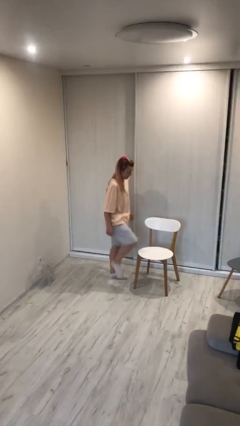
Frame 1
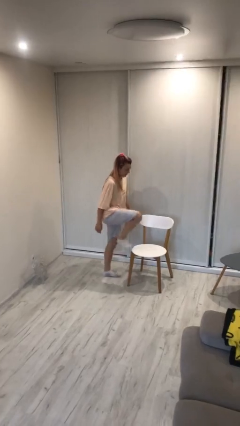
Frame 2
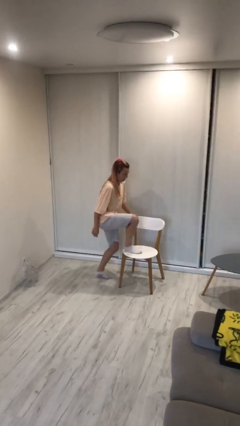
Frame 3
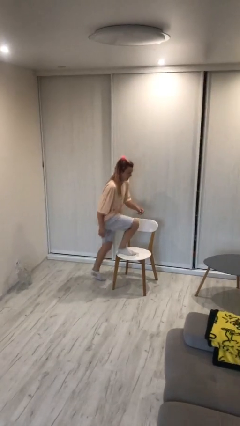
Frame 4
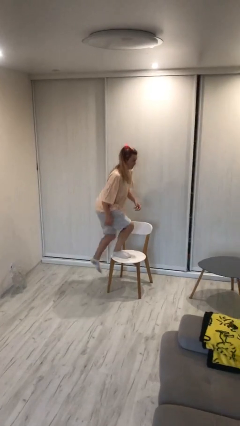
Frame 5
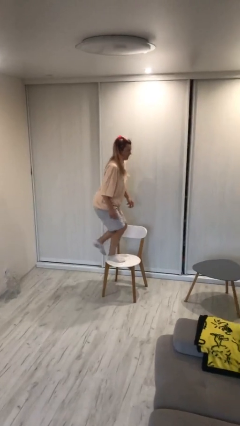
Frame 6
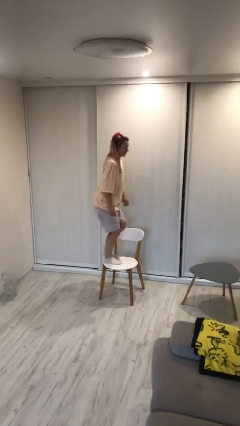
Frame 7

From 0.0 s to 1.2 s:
person climbs on chair

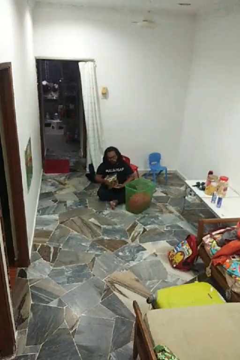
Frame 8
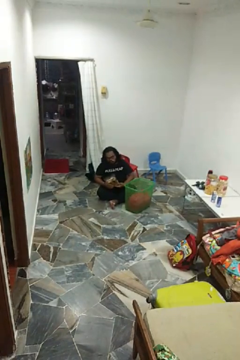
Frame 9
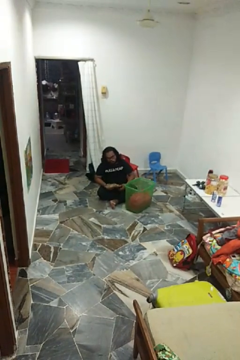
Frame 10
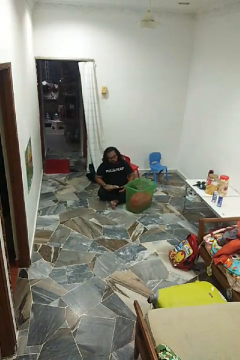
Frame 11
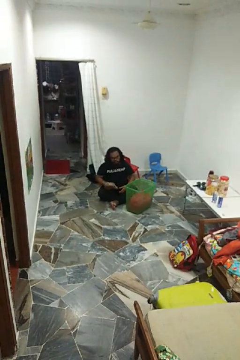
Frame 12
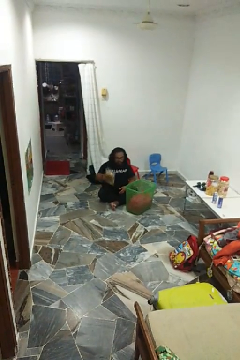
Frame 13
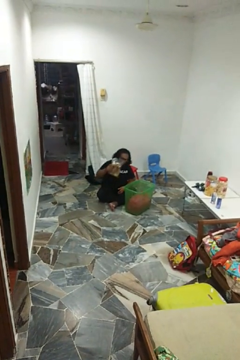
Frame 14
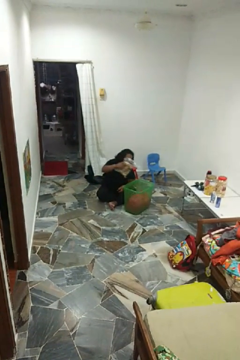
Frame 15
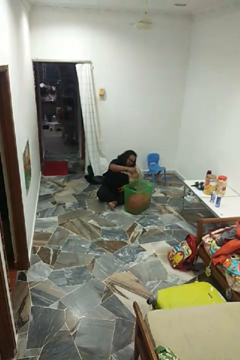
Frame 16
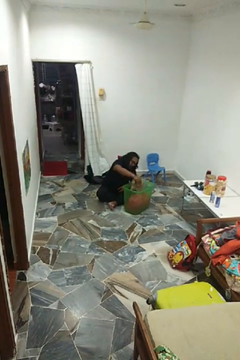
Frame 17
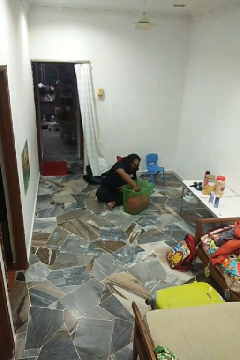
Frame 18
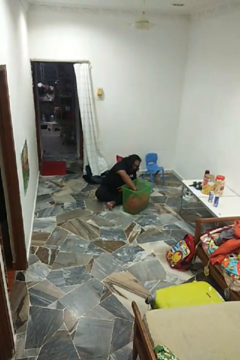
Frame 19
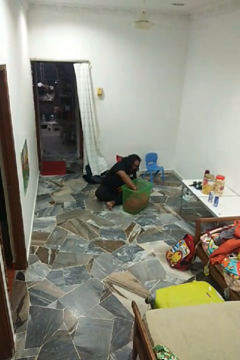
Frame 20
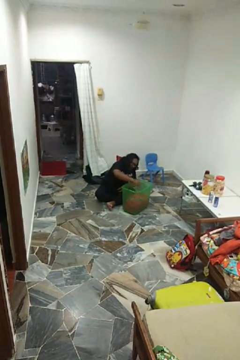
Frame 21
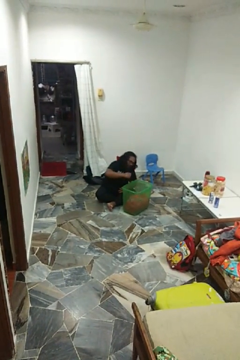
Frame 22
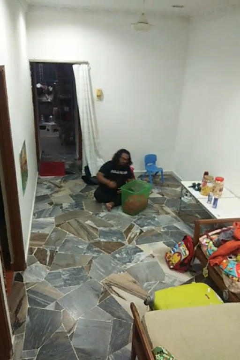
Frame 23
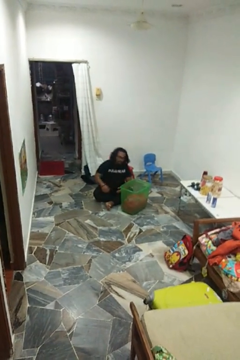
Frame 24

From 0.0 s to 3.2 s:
person puts object into basket

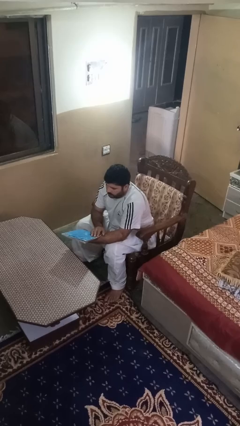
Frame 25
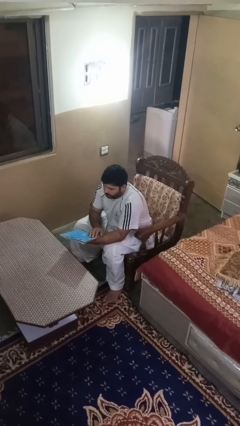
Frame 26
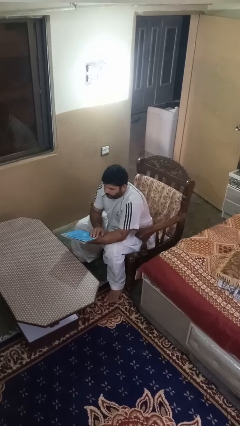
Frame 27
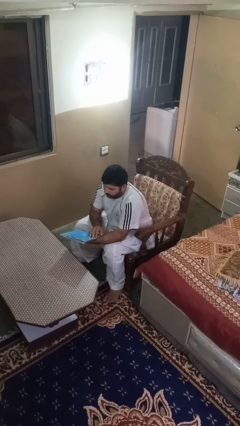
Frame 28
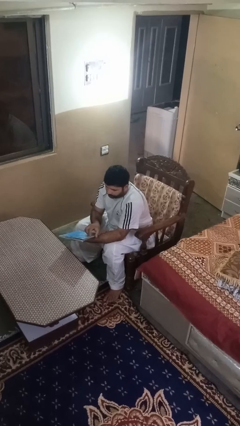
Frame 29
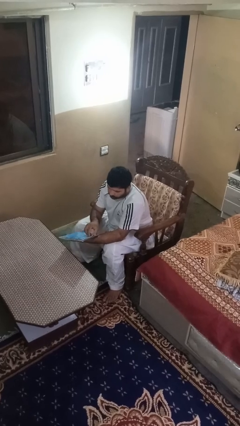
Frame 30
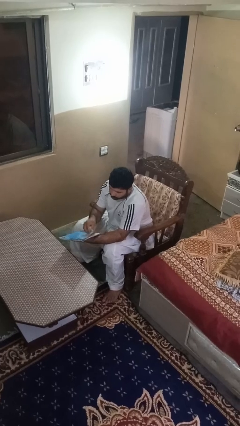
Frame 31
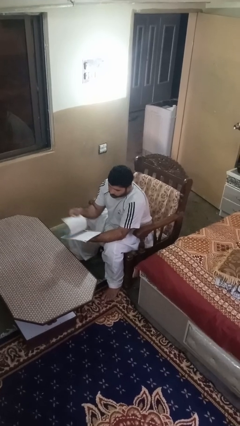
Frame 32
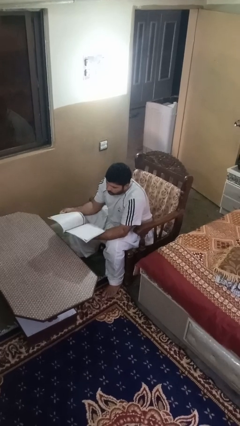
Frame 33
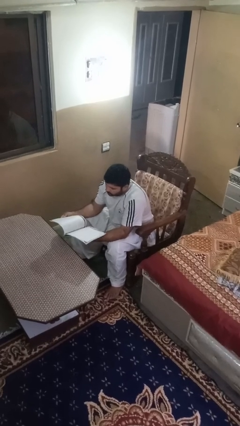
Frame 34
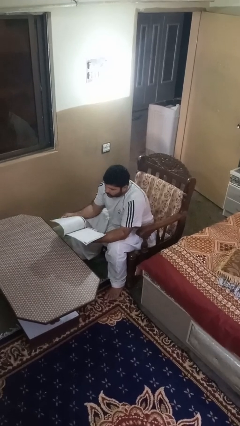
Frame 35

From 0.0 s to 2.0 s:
person reads magazine

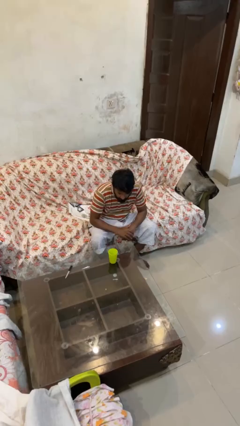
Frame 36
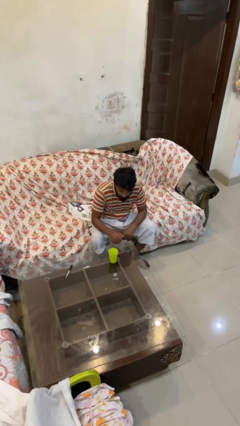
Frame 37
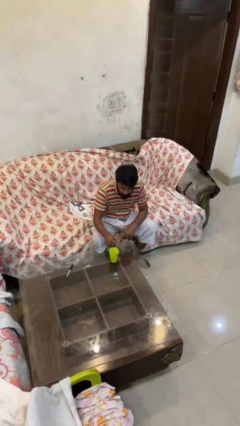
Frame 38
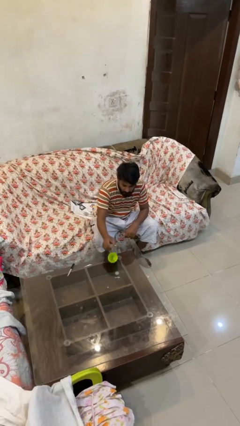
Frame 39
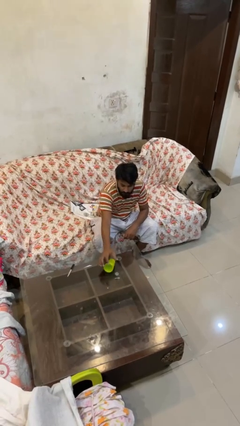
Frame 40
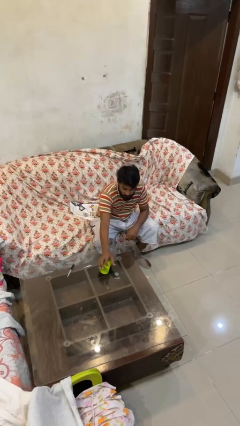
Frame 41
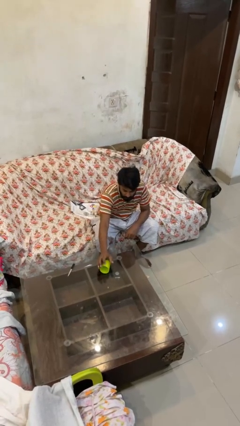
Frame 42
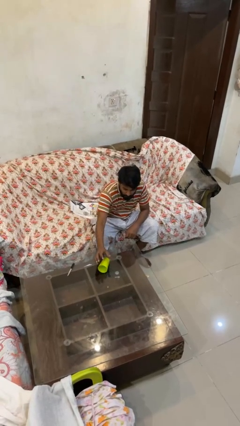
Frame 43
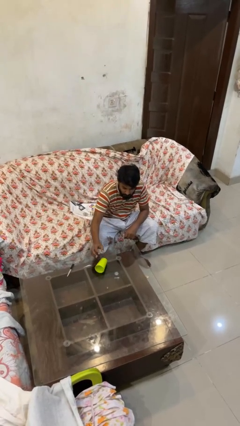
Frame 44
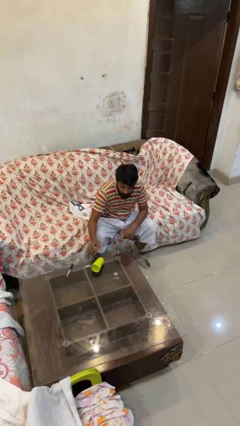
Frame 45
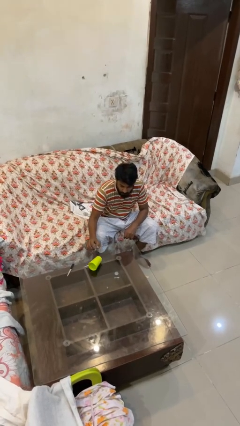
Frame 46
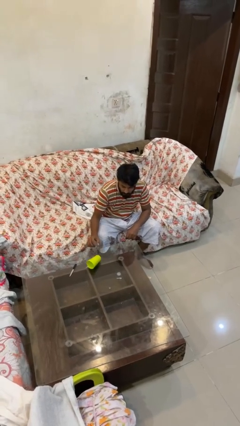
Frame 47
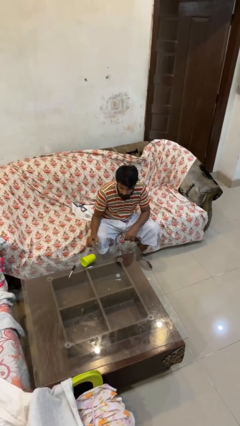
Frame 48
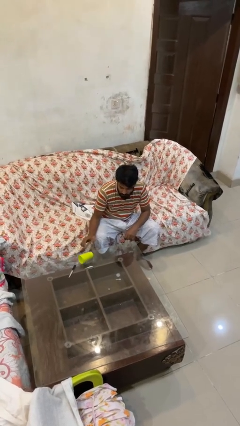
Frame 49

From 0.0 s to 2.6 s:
person knocks over glass

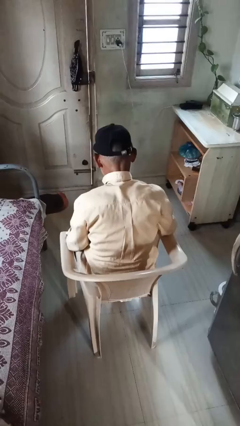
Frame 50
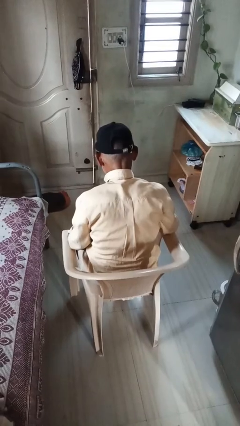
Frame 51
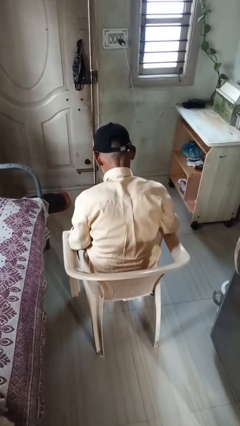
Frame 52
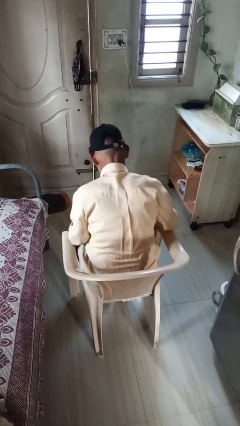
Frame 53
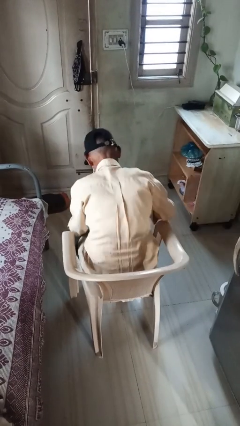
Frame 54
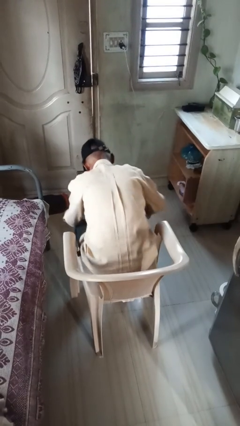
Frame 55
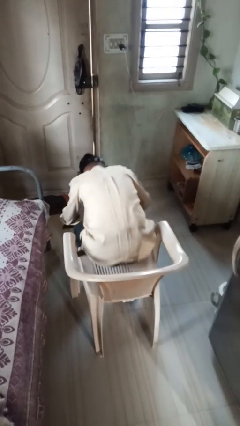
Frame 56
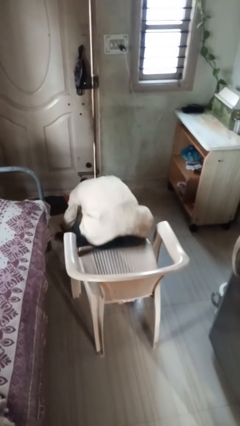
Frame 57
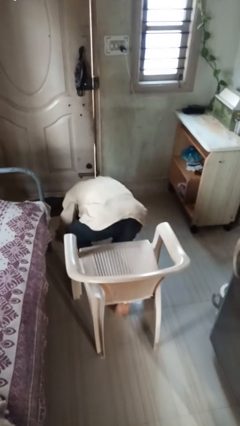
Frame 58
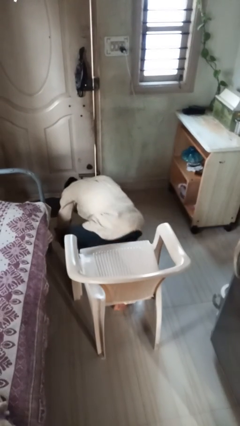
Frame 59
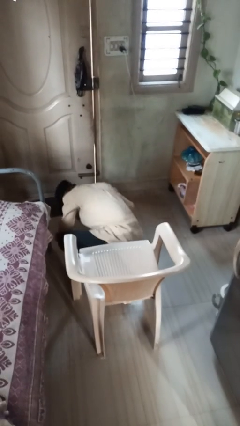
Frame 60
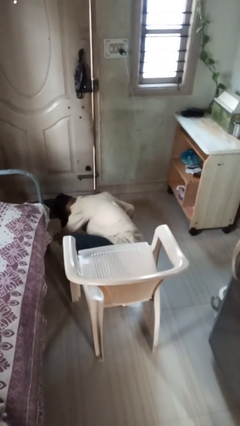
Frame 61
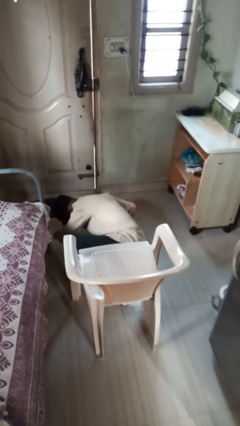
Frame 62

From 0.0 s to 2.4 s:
person falls from chair

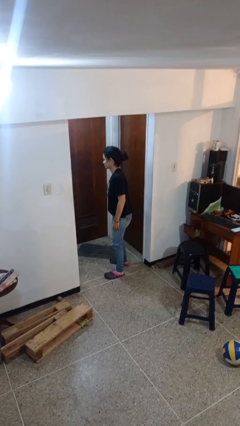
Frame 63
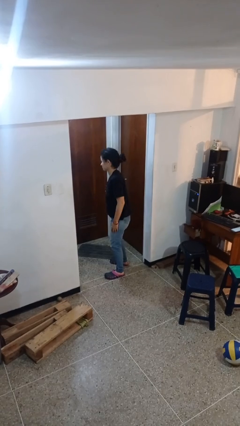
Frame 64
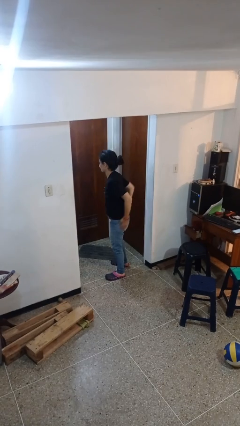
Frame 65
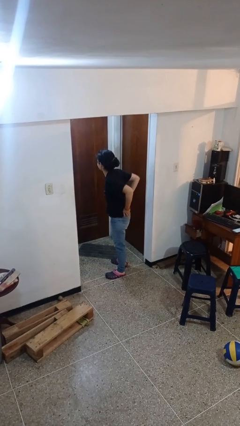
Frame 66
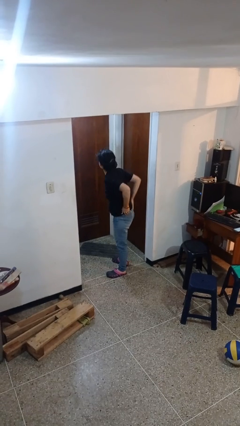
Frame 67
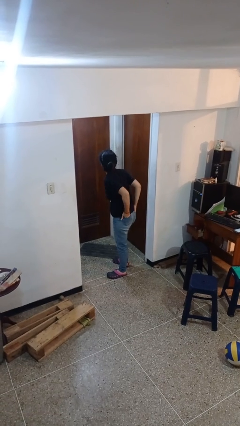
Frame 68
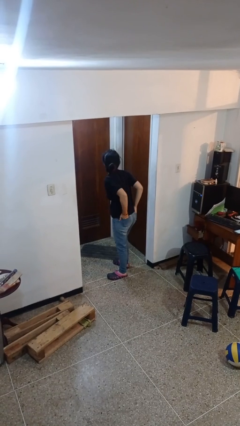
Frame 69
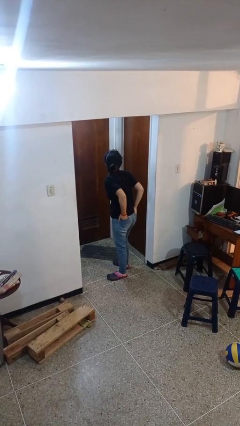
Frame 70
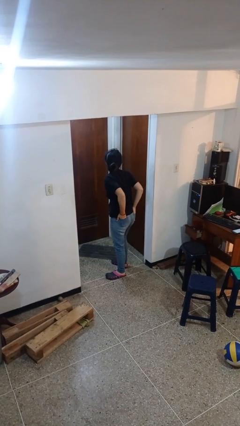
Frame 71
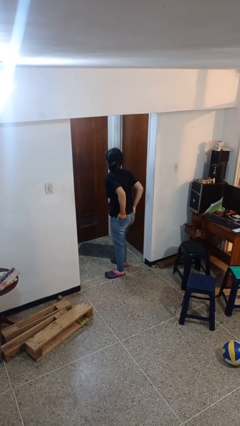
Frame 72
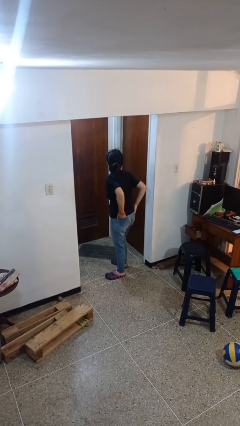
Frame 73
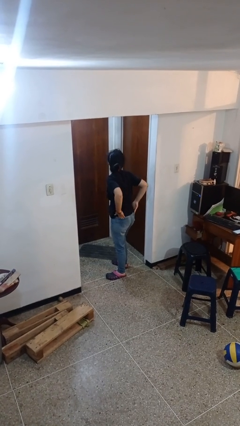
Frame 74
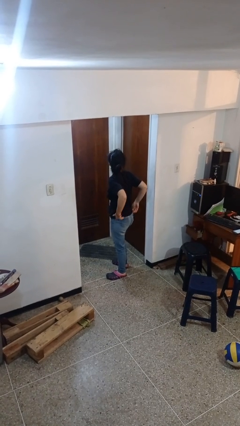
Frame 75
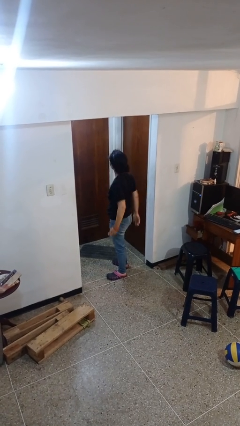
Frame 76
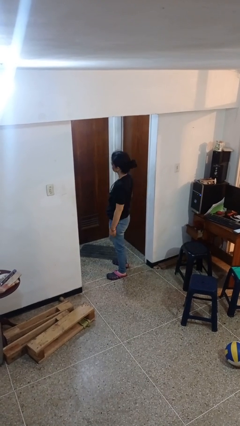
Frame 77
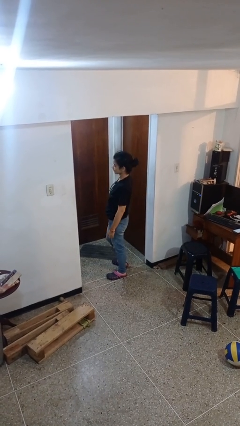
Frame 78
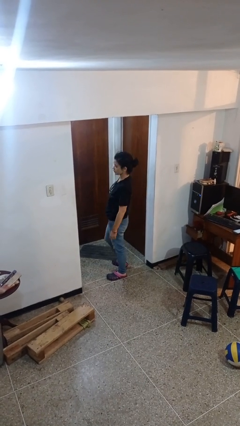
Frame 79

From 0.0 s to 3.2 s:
person puts hands in back pockets

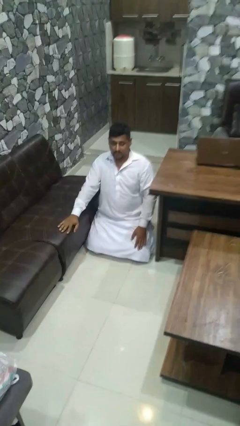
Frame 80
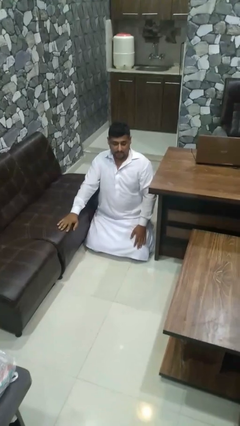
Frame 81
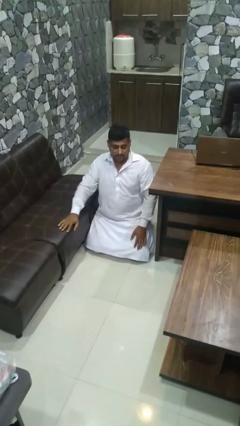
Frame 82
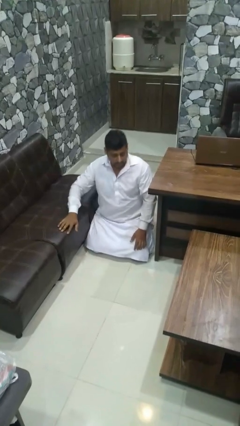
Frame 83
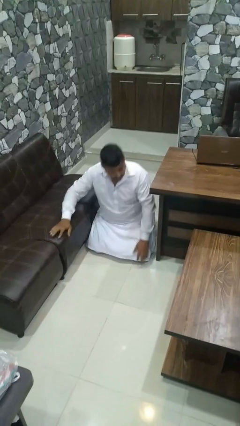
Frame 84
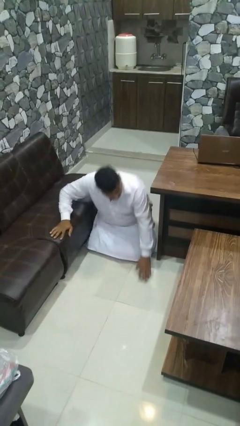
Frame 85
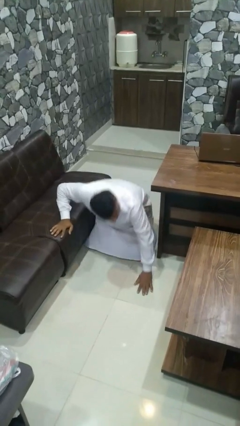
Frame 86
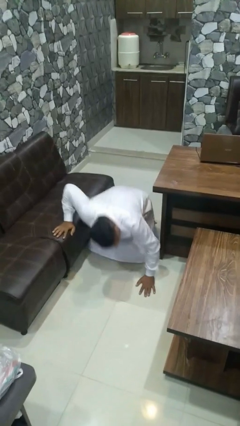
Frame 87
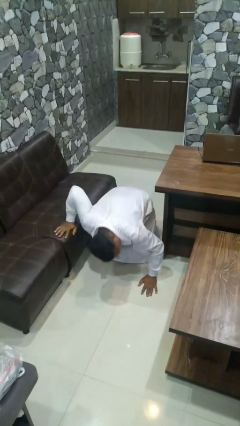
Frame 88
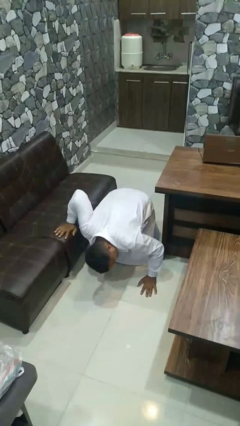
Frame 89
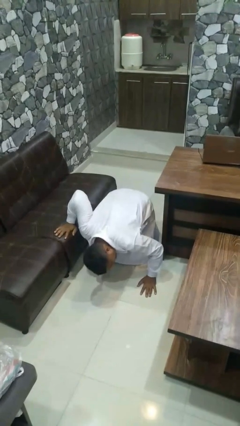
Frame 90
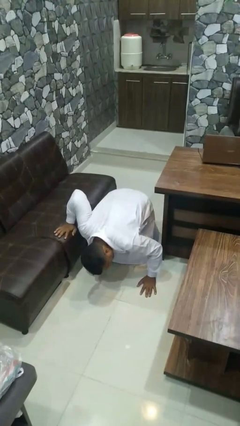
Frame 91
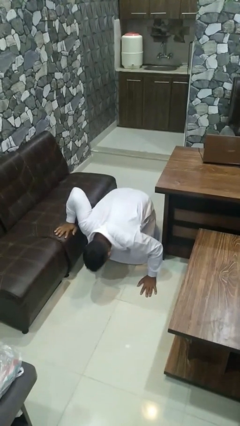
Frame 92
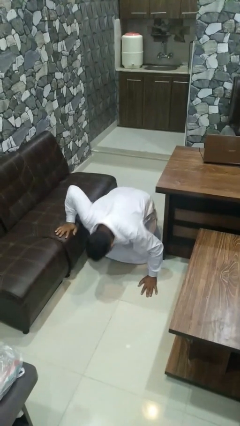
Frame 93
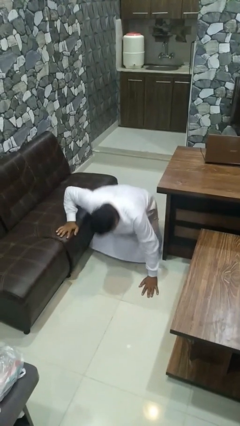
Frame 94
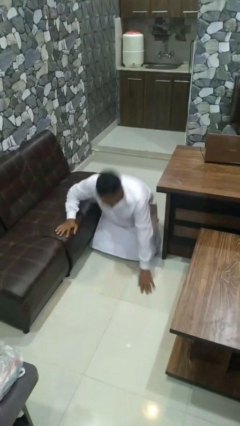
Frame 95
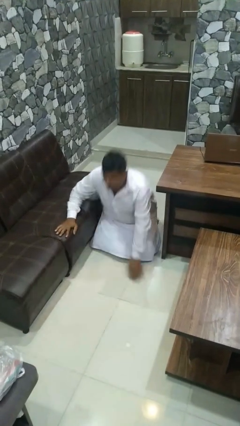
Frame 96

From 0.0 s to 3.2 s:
person searches under couch

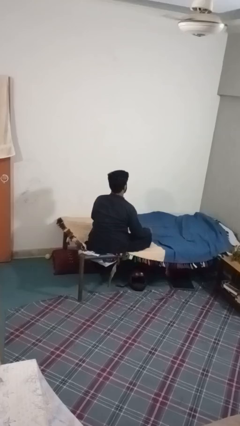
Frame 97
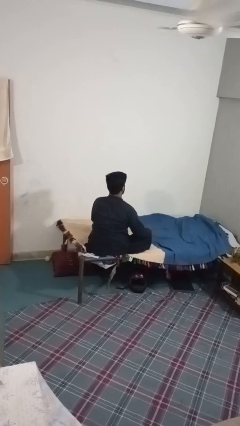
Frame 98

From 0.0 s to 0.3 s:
person gestures cut
